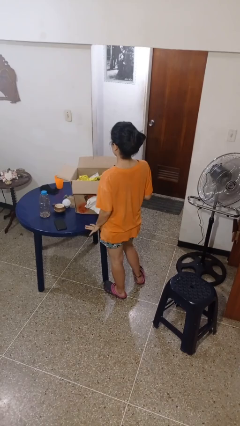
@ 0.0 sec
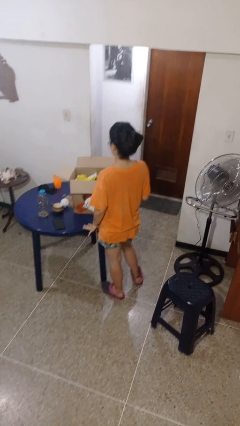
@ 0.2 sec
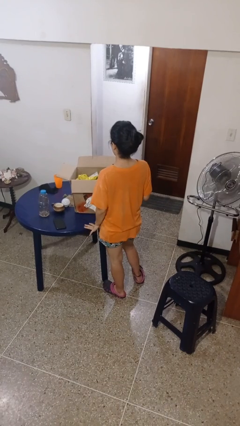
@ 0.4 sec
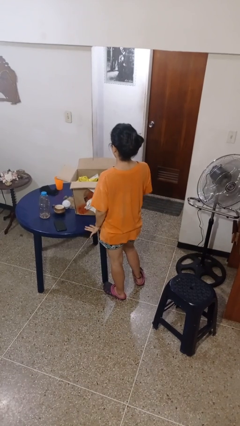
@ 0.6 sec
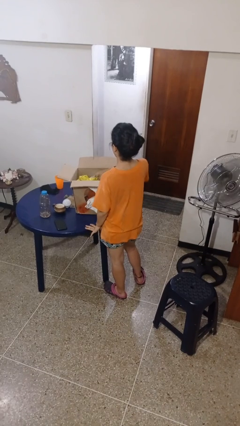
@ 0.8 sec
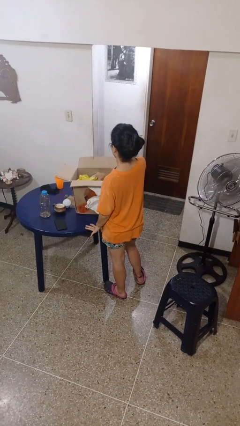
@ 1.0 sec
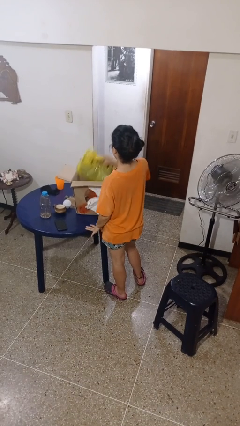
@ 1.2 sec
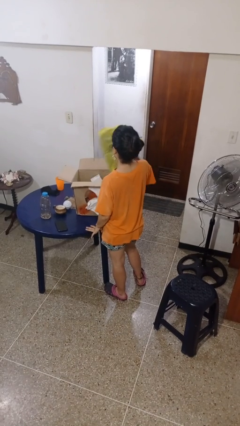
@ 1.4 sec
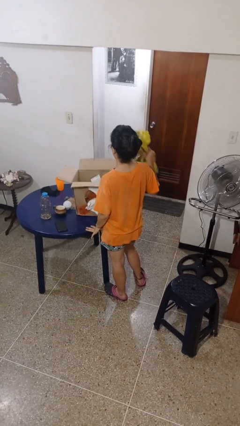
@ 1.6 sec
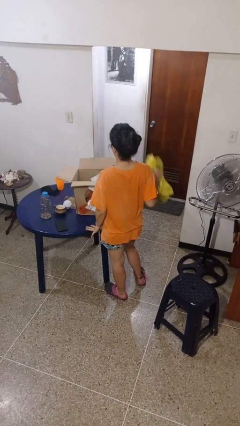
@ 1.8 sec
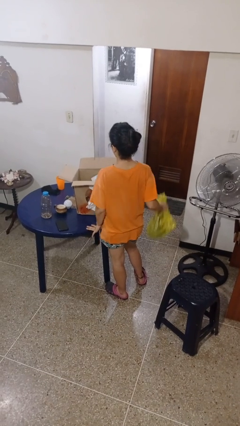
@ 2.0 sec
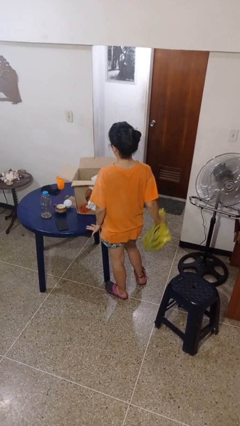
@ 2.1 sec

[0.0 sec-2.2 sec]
person takes object from box

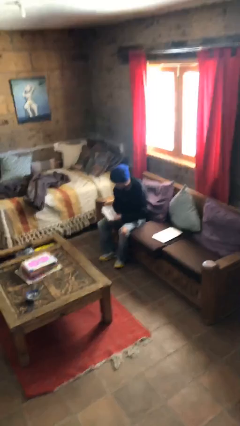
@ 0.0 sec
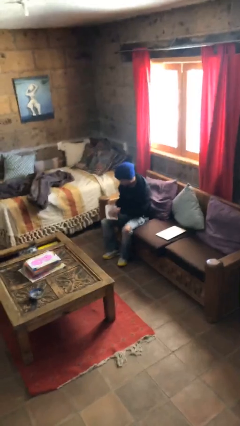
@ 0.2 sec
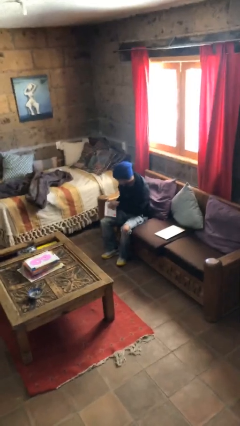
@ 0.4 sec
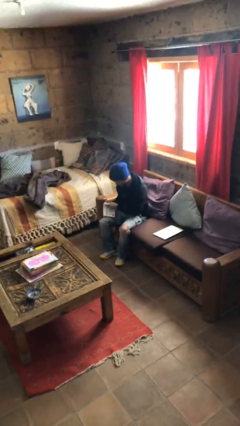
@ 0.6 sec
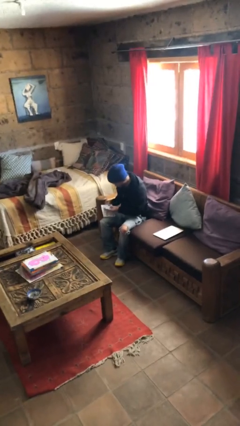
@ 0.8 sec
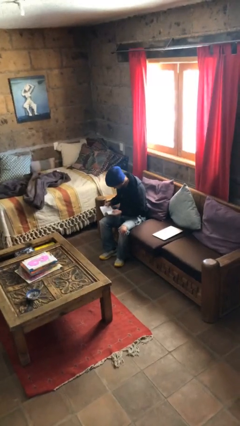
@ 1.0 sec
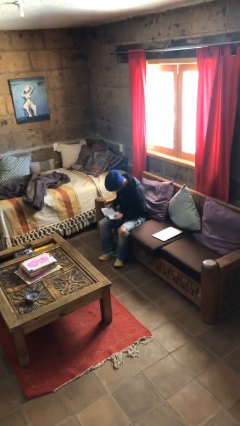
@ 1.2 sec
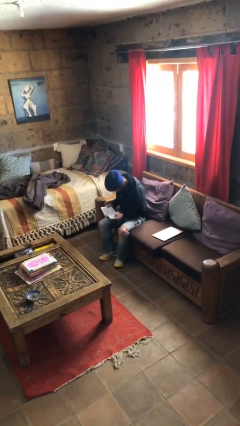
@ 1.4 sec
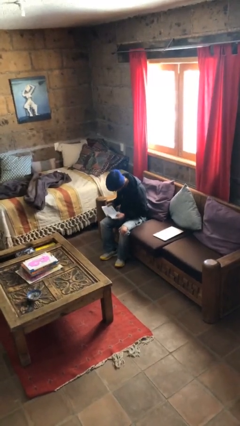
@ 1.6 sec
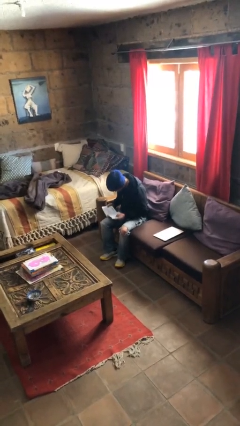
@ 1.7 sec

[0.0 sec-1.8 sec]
person reads document

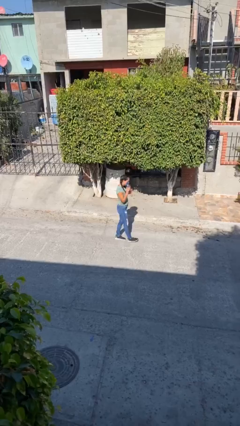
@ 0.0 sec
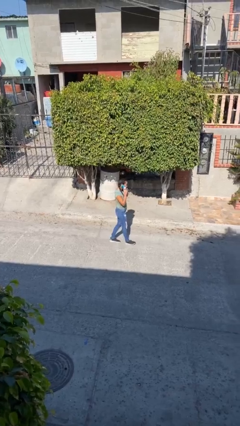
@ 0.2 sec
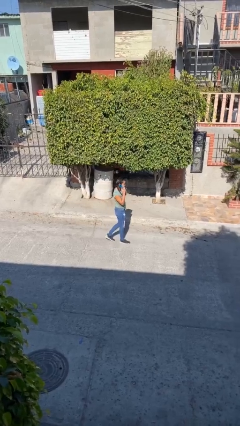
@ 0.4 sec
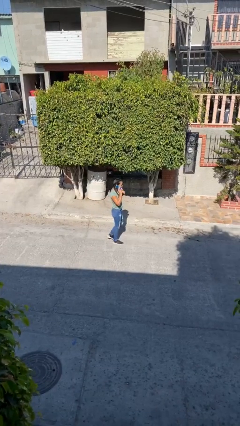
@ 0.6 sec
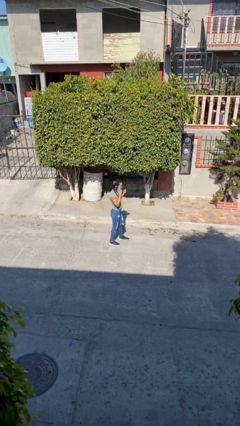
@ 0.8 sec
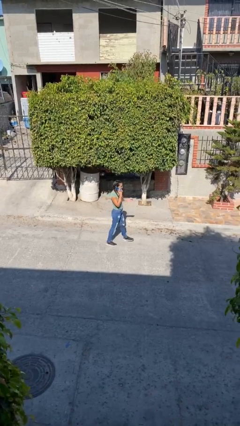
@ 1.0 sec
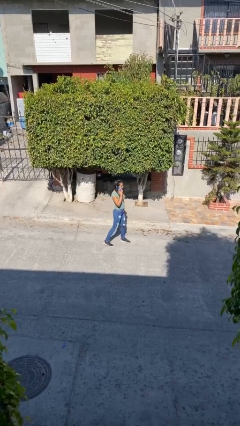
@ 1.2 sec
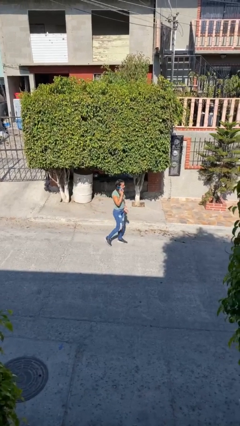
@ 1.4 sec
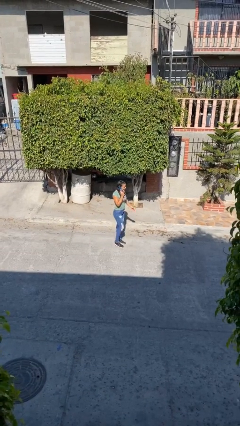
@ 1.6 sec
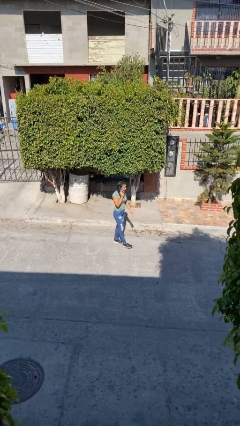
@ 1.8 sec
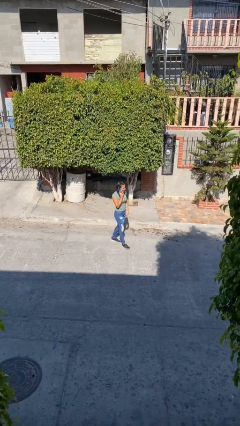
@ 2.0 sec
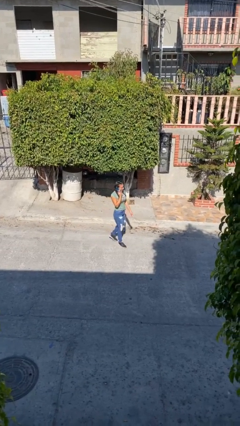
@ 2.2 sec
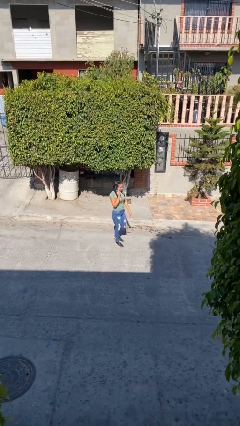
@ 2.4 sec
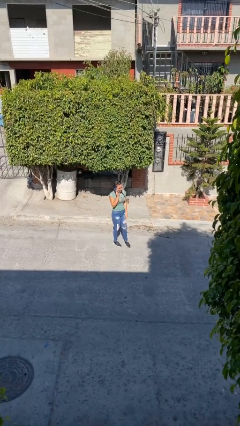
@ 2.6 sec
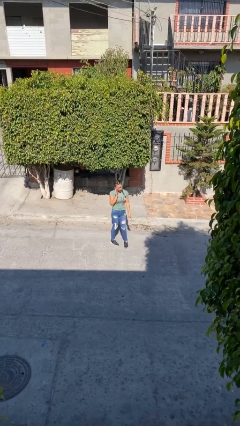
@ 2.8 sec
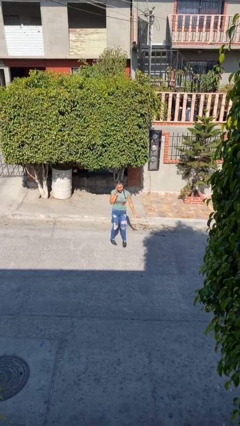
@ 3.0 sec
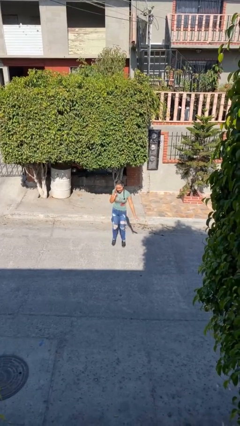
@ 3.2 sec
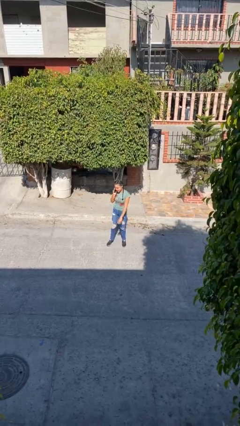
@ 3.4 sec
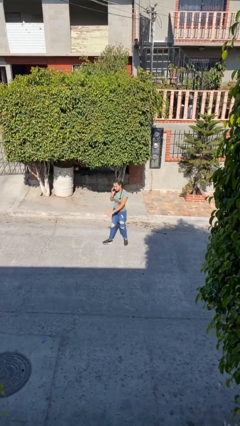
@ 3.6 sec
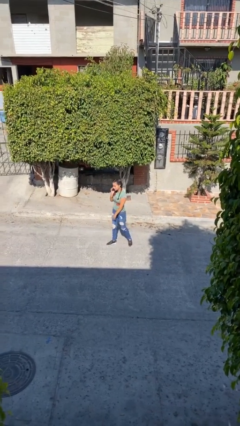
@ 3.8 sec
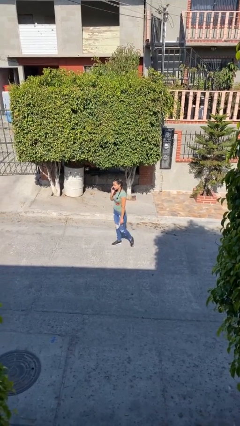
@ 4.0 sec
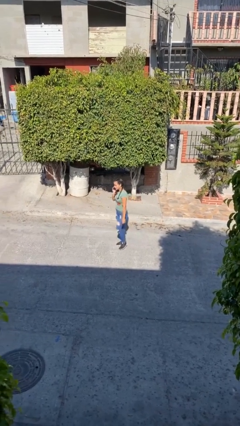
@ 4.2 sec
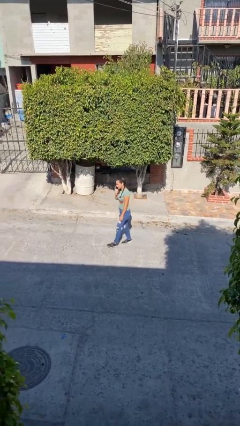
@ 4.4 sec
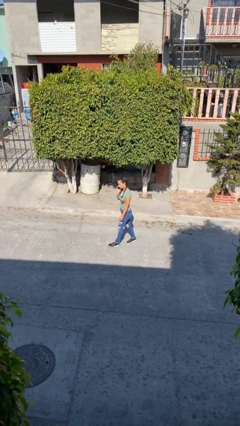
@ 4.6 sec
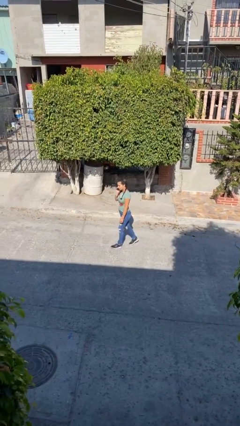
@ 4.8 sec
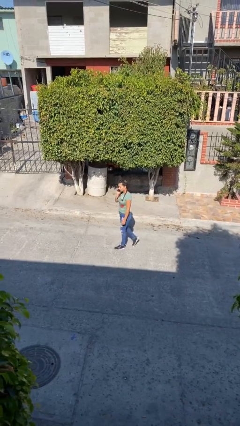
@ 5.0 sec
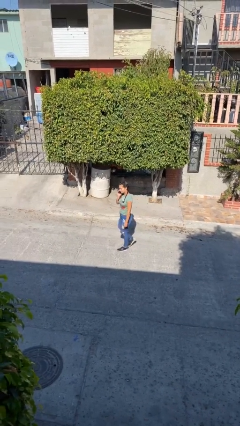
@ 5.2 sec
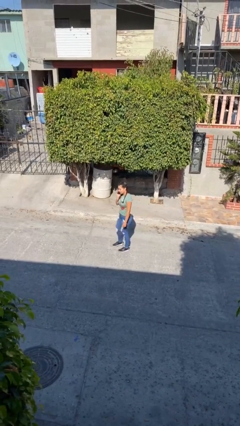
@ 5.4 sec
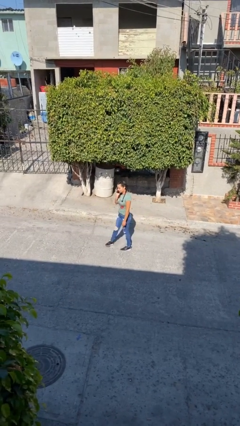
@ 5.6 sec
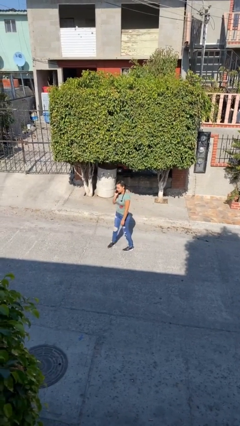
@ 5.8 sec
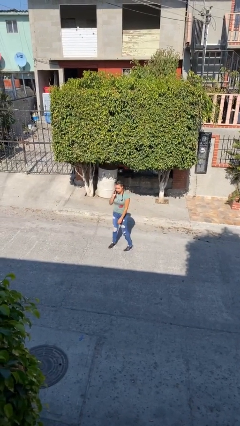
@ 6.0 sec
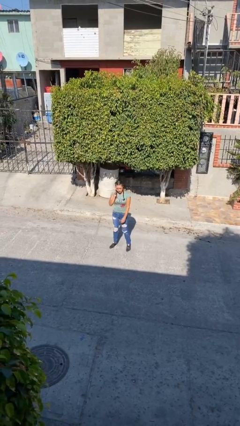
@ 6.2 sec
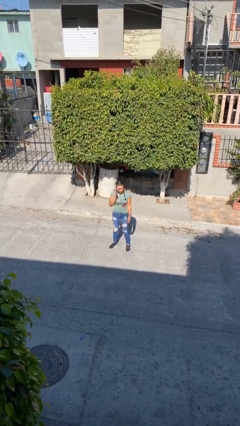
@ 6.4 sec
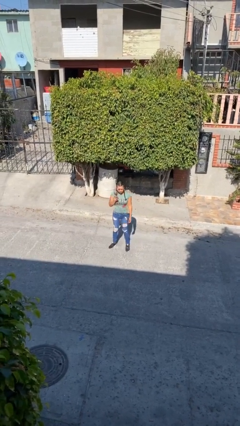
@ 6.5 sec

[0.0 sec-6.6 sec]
person talks on phone

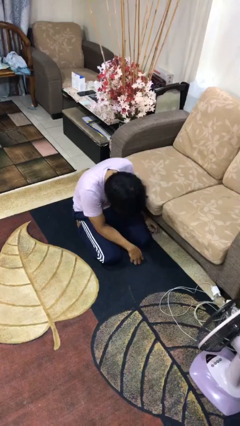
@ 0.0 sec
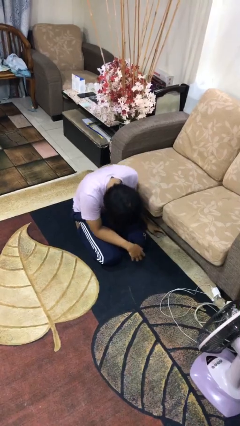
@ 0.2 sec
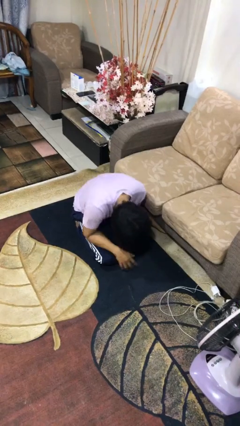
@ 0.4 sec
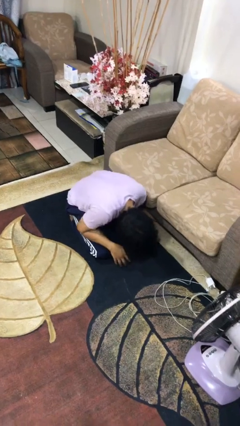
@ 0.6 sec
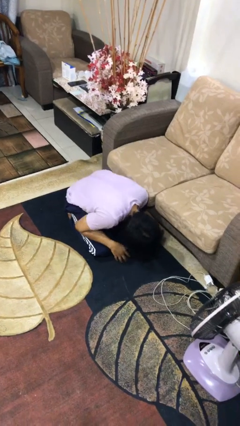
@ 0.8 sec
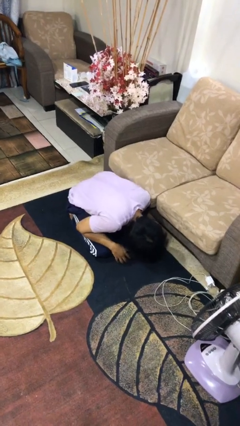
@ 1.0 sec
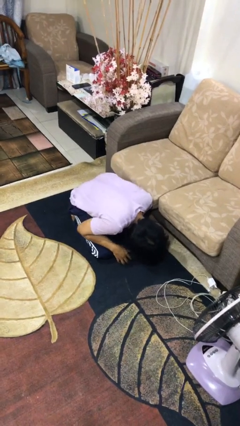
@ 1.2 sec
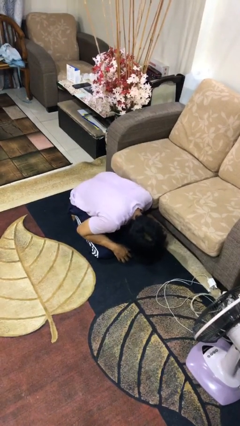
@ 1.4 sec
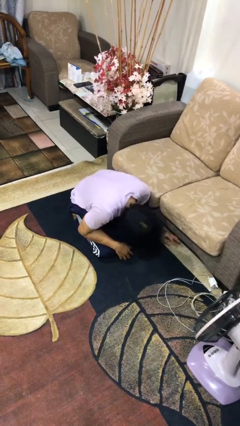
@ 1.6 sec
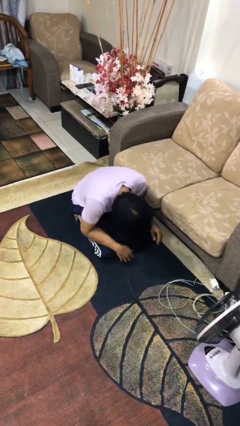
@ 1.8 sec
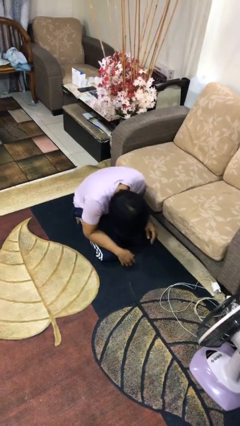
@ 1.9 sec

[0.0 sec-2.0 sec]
person searches under couch

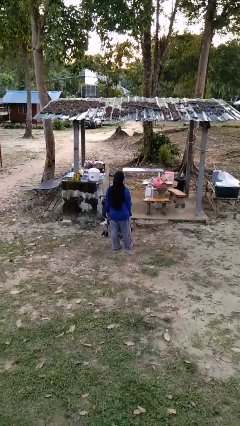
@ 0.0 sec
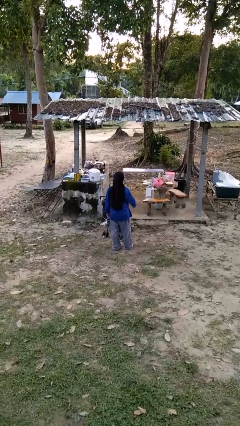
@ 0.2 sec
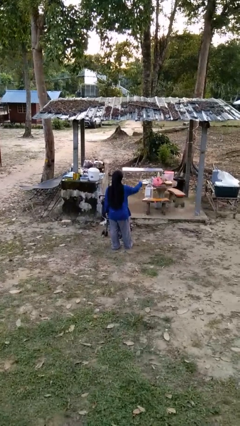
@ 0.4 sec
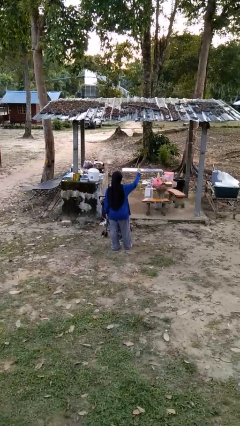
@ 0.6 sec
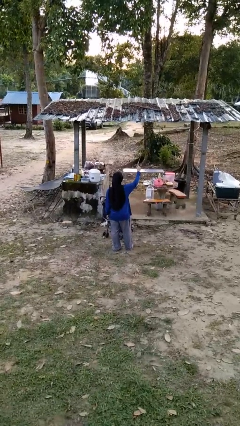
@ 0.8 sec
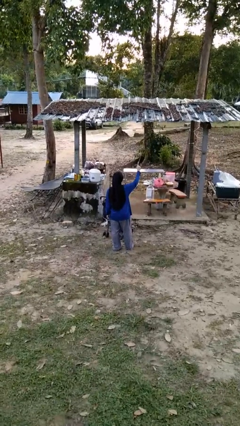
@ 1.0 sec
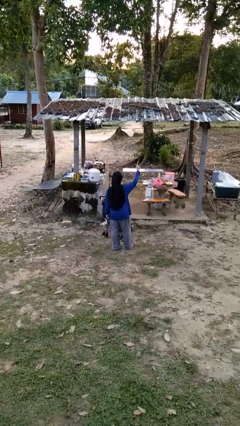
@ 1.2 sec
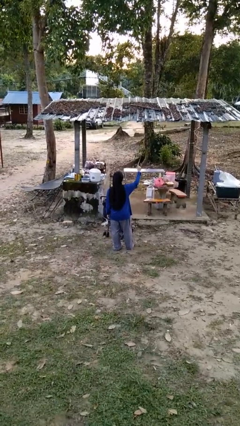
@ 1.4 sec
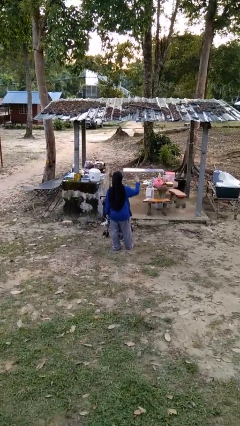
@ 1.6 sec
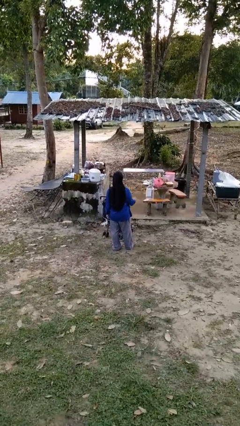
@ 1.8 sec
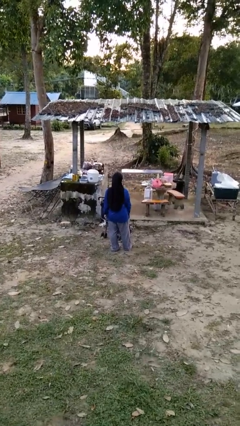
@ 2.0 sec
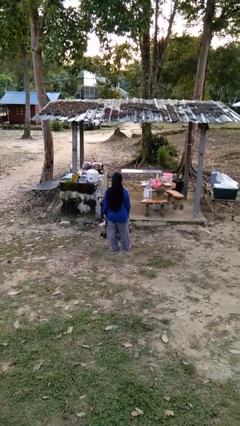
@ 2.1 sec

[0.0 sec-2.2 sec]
person gestures number one

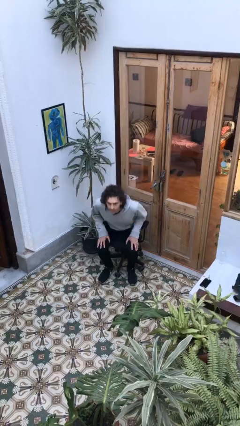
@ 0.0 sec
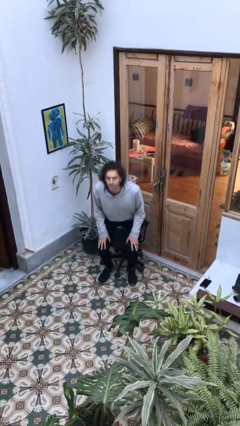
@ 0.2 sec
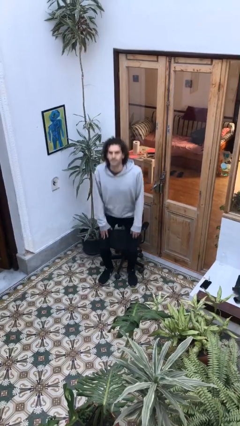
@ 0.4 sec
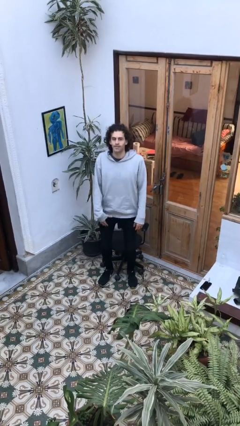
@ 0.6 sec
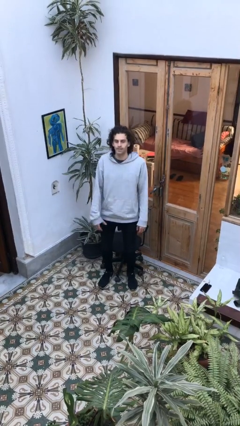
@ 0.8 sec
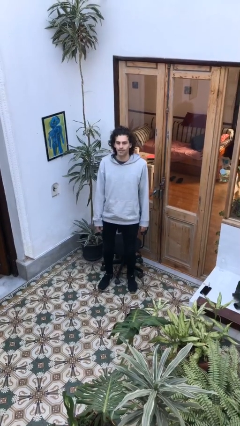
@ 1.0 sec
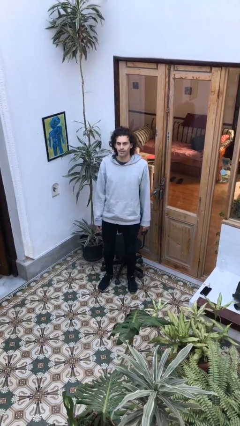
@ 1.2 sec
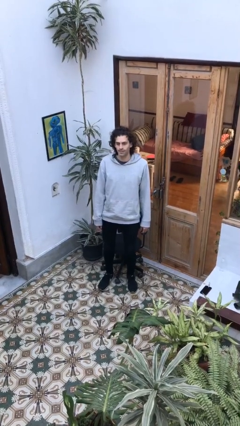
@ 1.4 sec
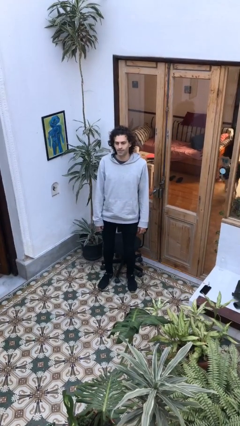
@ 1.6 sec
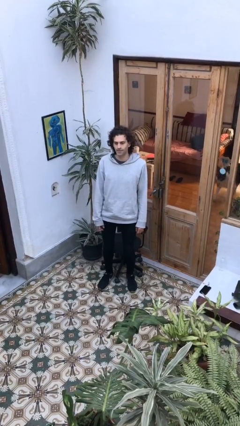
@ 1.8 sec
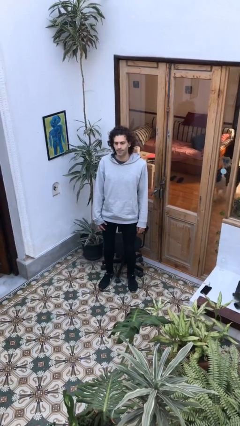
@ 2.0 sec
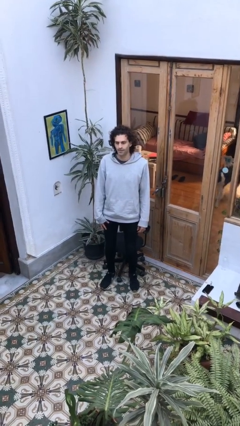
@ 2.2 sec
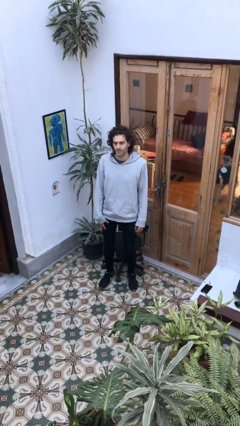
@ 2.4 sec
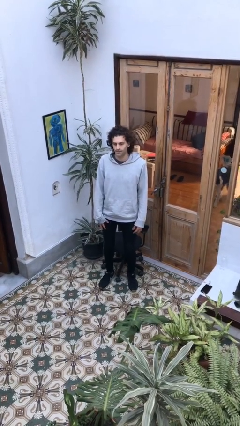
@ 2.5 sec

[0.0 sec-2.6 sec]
person stands up

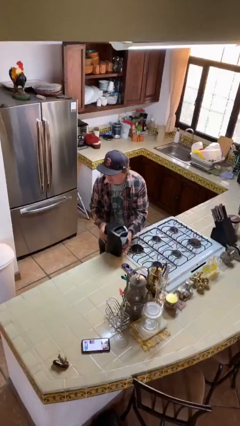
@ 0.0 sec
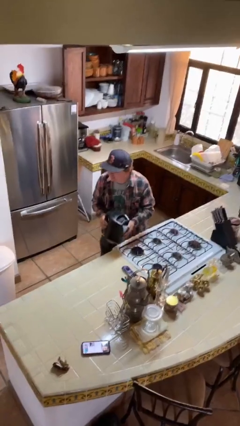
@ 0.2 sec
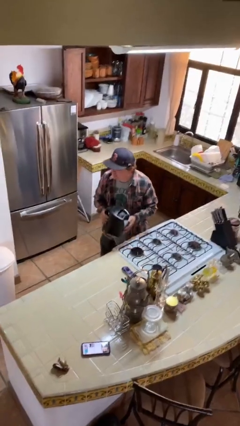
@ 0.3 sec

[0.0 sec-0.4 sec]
person picks up object from table
